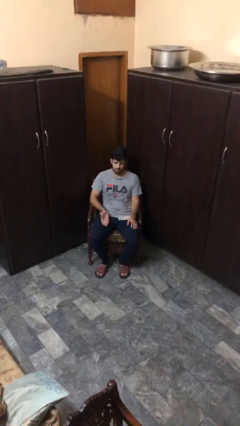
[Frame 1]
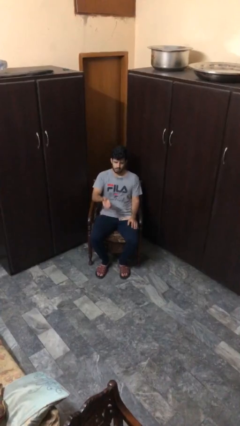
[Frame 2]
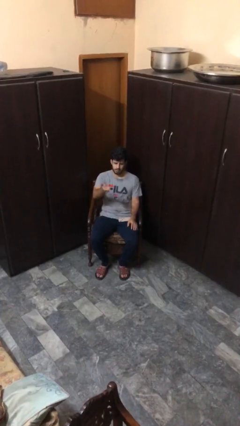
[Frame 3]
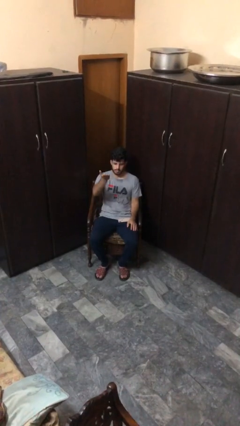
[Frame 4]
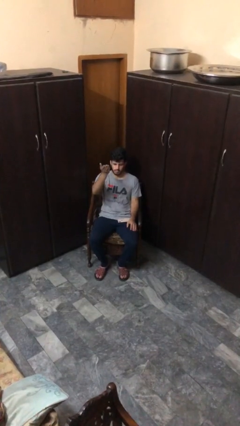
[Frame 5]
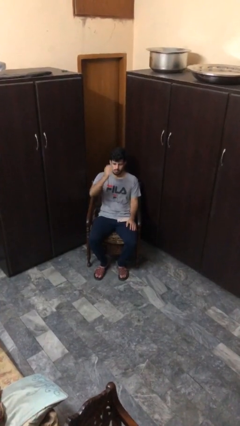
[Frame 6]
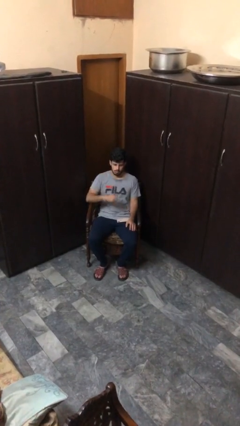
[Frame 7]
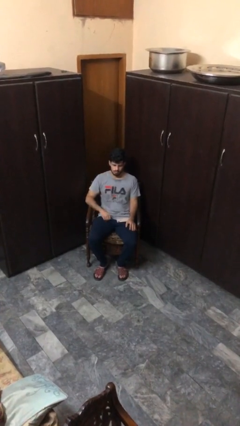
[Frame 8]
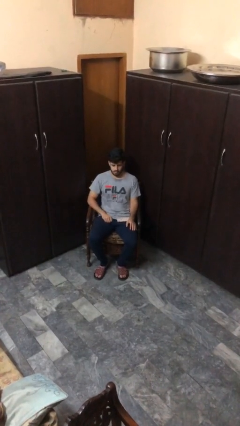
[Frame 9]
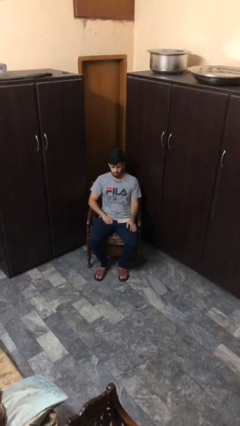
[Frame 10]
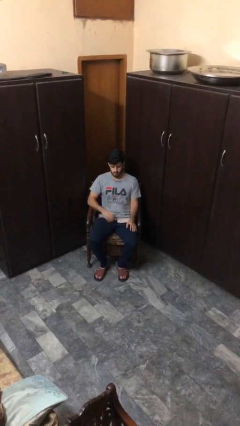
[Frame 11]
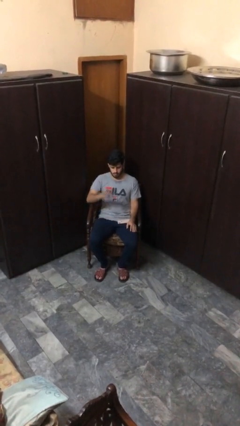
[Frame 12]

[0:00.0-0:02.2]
person gestures swipe up

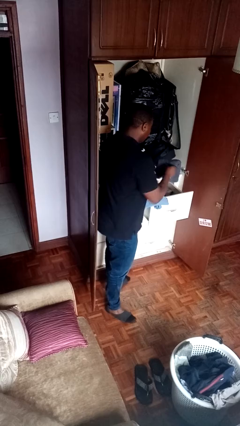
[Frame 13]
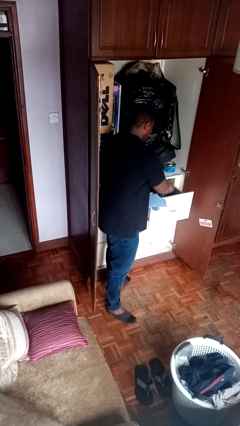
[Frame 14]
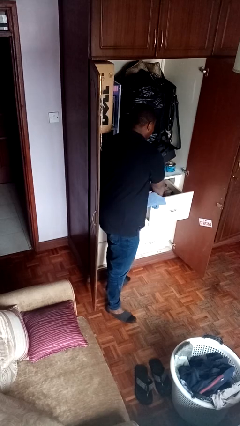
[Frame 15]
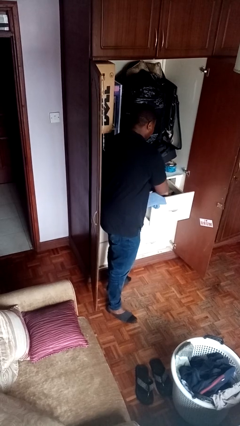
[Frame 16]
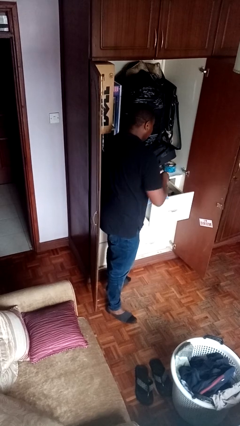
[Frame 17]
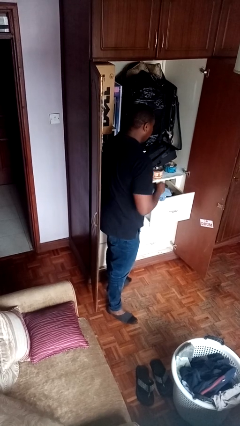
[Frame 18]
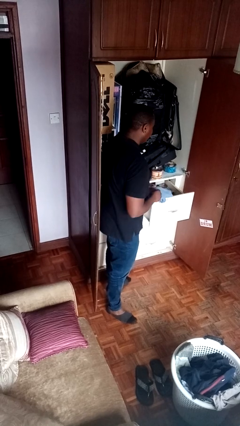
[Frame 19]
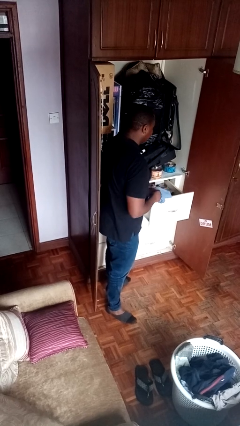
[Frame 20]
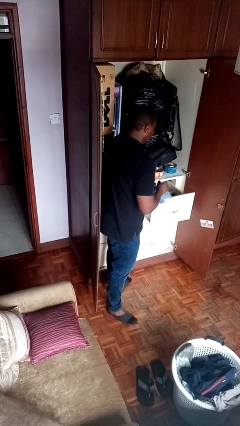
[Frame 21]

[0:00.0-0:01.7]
person puts clothes into dresser

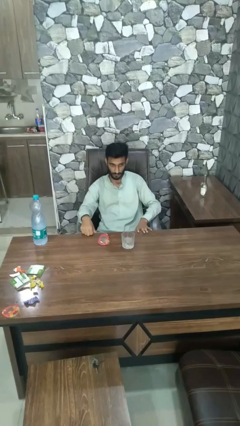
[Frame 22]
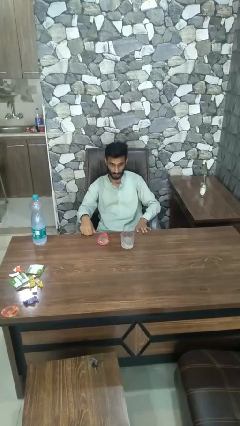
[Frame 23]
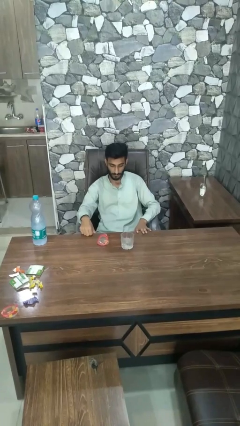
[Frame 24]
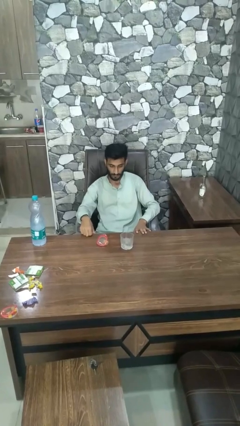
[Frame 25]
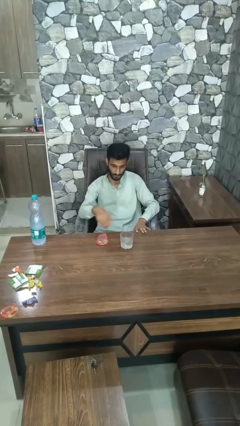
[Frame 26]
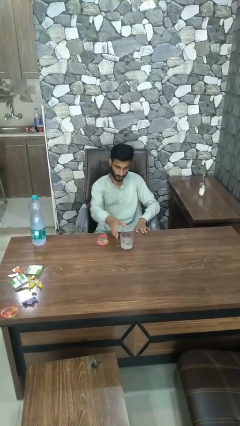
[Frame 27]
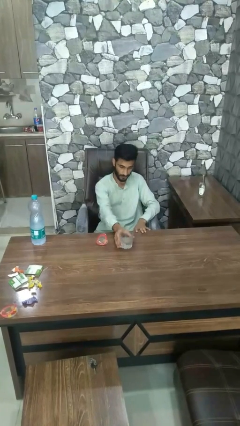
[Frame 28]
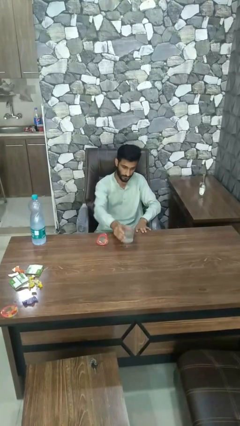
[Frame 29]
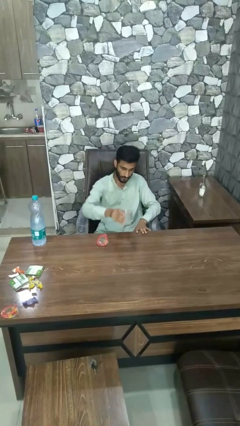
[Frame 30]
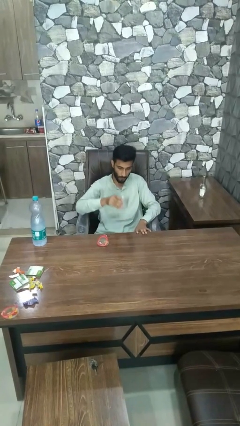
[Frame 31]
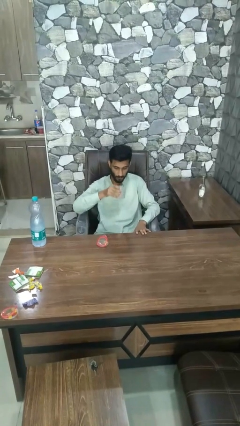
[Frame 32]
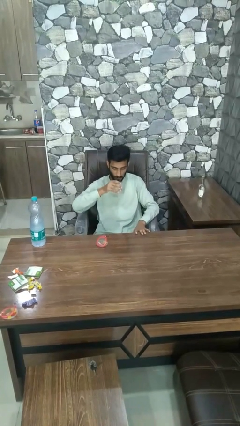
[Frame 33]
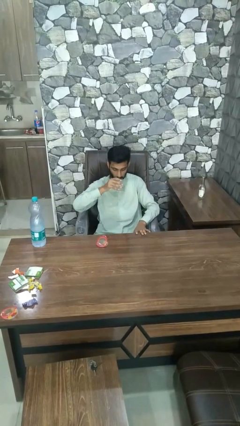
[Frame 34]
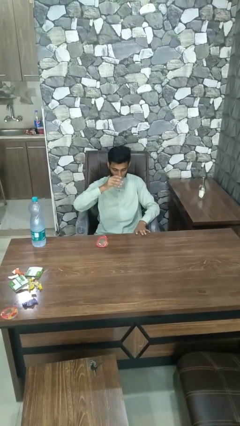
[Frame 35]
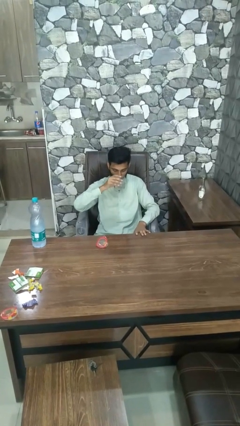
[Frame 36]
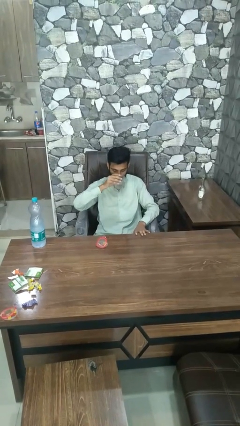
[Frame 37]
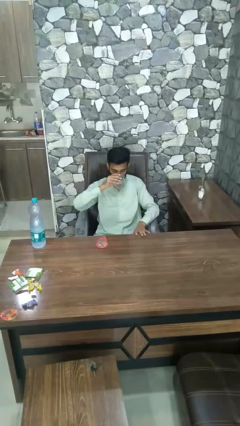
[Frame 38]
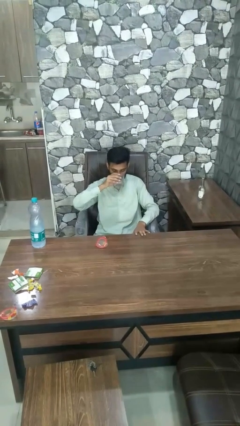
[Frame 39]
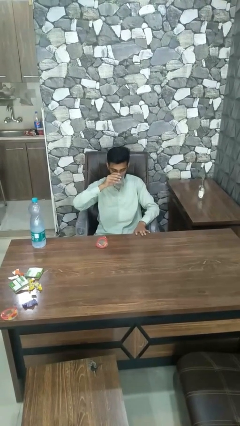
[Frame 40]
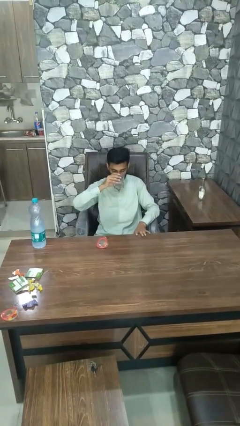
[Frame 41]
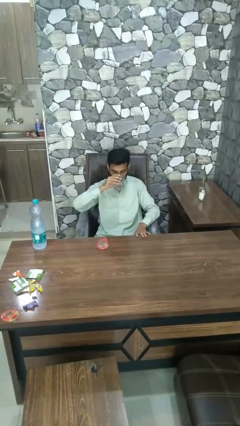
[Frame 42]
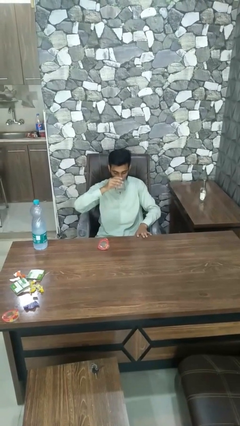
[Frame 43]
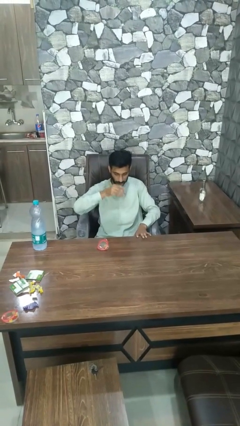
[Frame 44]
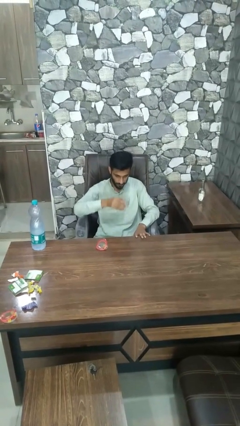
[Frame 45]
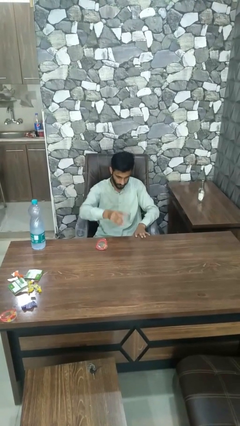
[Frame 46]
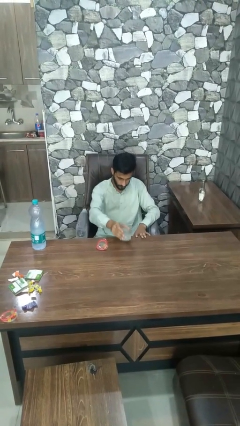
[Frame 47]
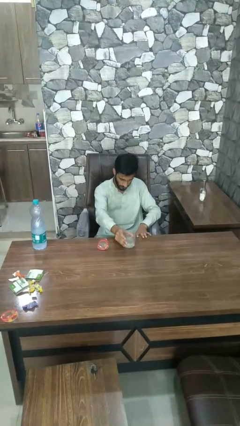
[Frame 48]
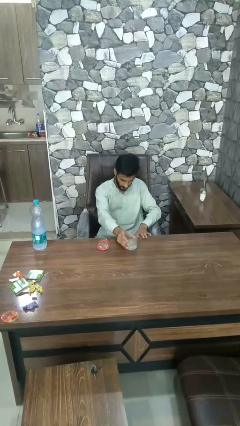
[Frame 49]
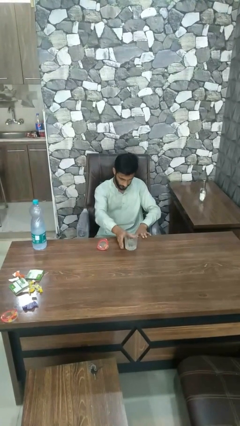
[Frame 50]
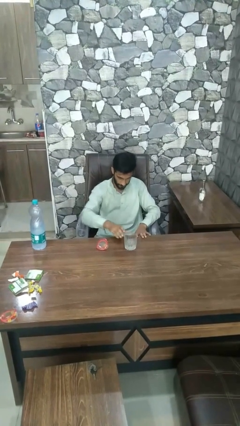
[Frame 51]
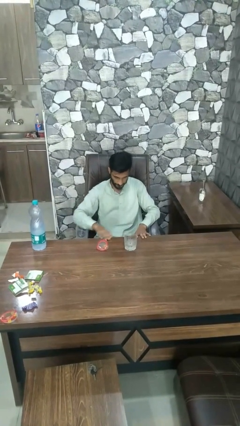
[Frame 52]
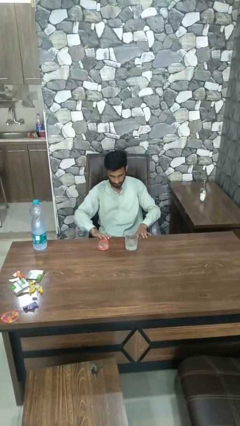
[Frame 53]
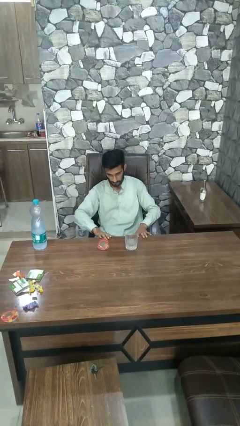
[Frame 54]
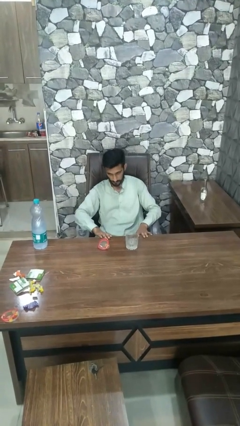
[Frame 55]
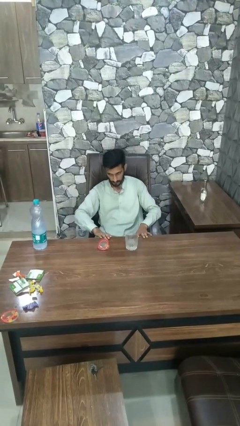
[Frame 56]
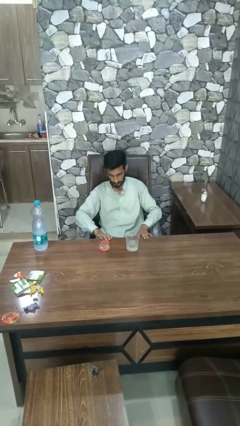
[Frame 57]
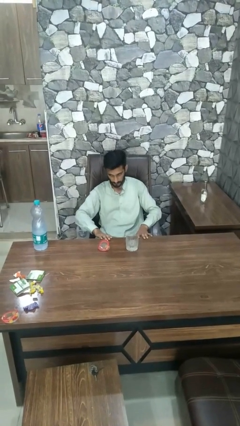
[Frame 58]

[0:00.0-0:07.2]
person drinks from cup

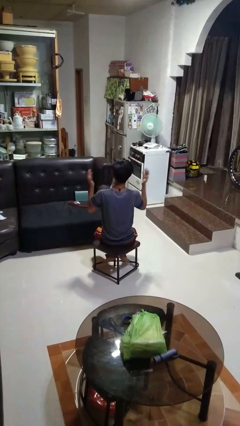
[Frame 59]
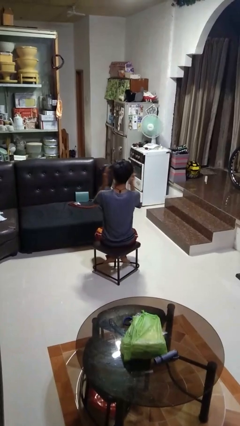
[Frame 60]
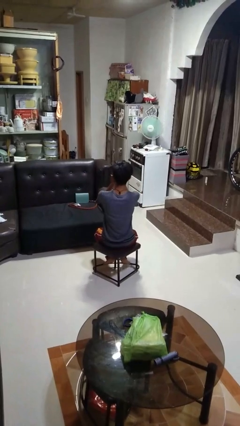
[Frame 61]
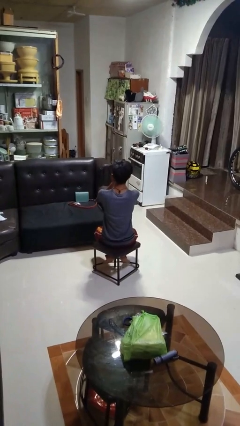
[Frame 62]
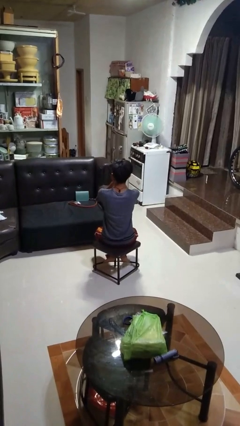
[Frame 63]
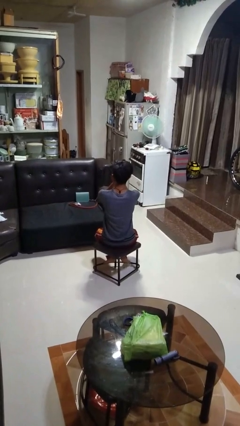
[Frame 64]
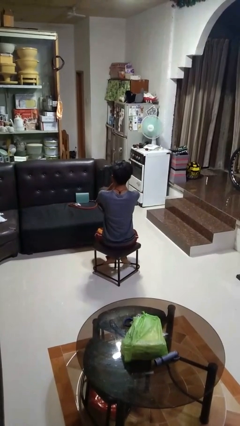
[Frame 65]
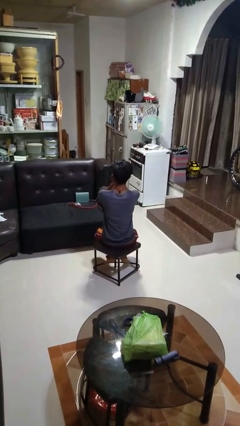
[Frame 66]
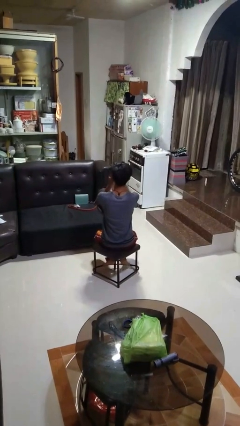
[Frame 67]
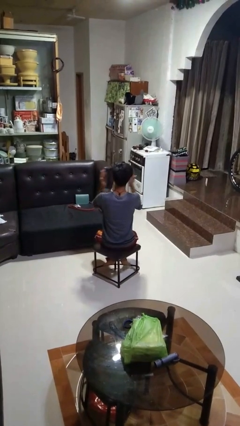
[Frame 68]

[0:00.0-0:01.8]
person covers face with hands

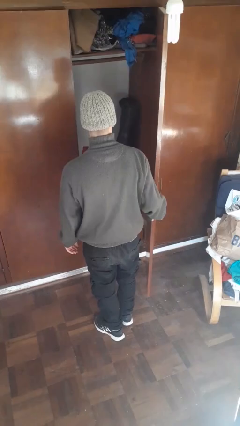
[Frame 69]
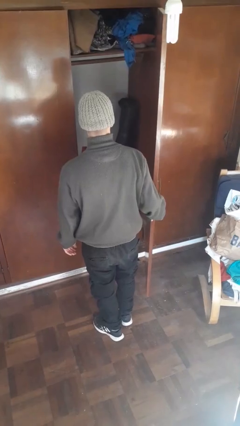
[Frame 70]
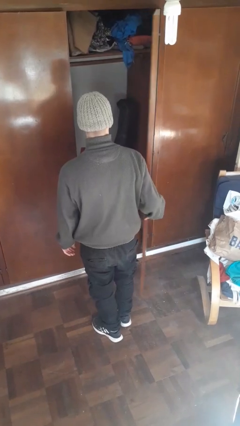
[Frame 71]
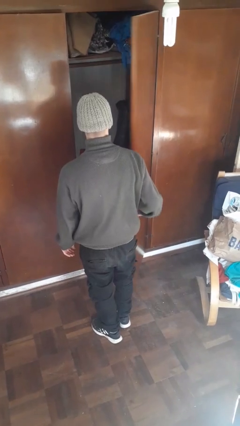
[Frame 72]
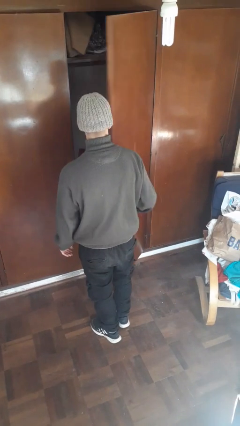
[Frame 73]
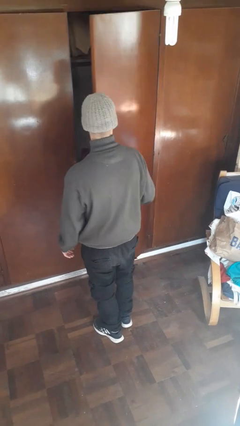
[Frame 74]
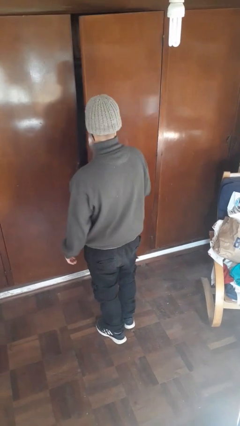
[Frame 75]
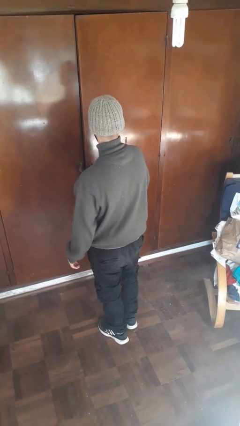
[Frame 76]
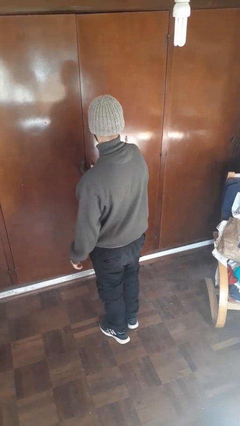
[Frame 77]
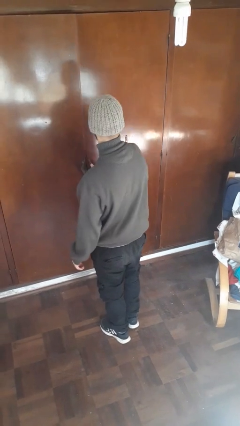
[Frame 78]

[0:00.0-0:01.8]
person closes closet door

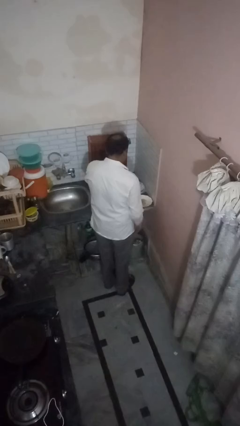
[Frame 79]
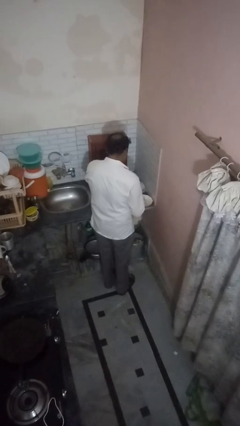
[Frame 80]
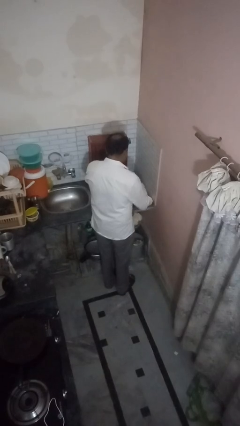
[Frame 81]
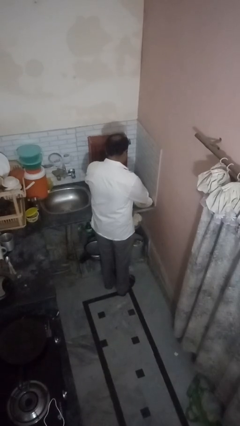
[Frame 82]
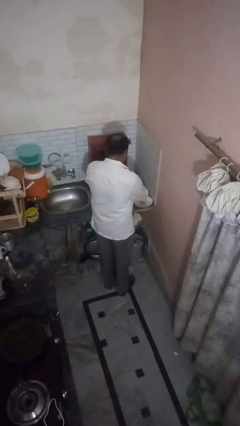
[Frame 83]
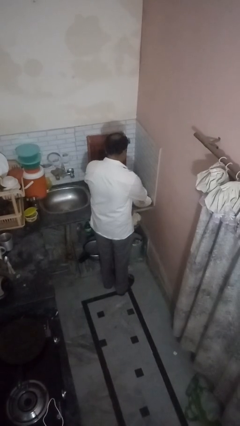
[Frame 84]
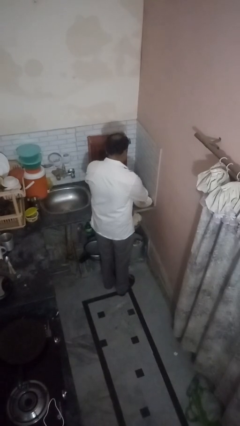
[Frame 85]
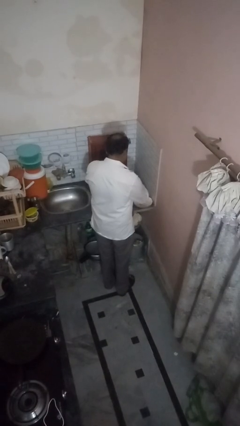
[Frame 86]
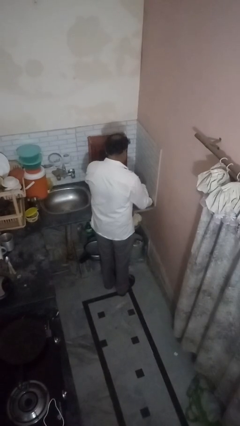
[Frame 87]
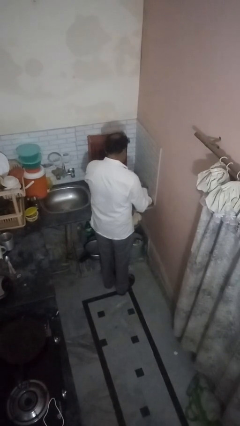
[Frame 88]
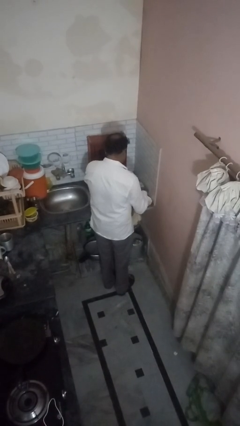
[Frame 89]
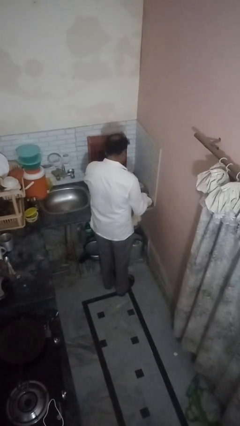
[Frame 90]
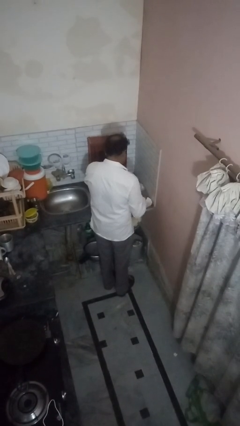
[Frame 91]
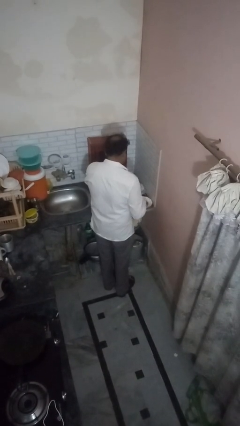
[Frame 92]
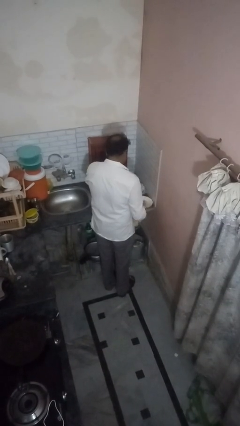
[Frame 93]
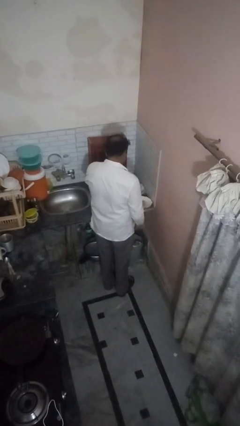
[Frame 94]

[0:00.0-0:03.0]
person pours into bowl

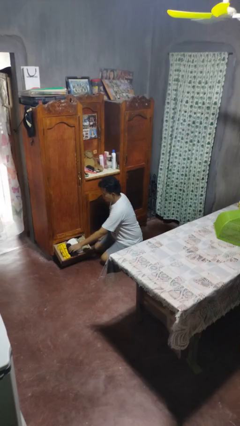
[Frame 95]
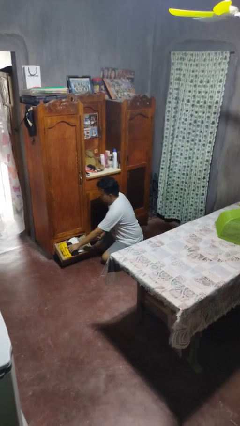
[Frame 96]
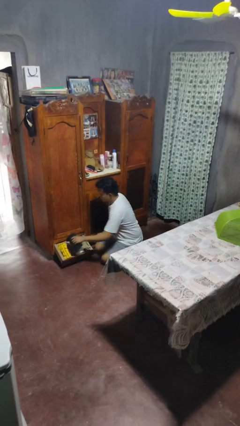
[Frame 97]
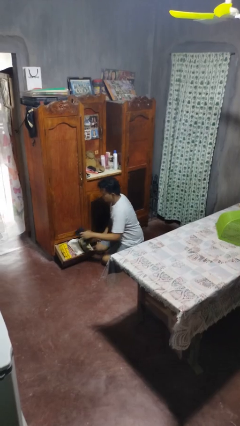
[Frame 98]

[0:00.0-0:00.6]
person takes clothes from dresser
